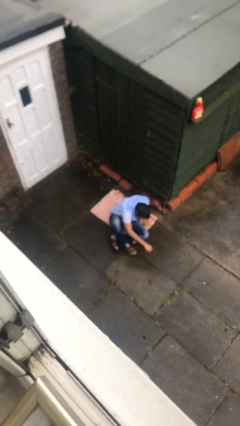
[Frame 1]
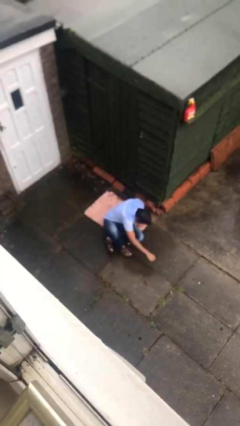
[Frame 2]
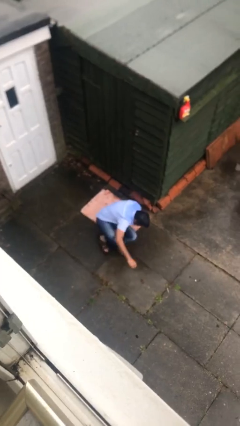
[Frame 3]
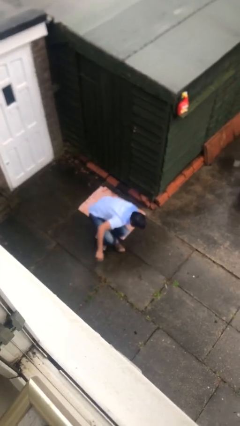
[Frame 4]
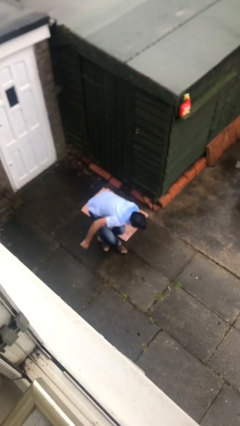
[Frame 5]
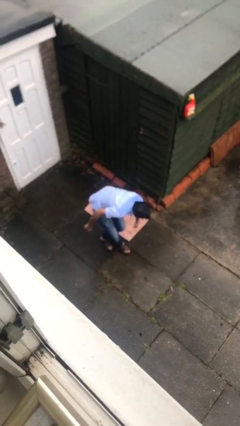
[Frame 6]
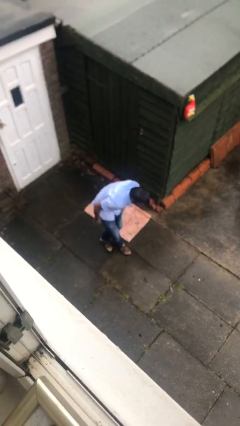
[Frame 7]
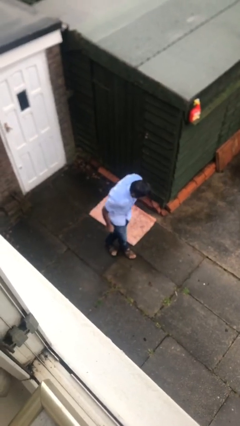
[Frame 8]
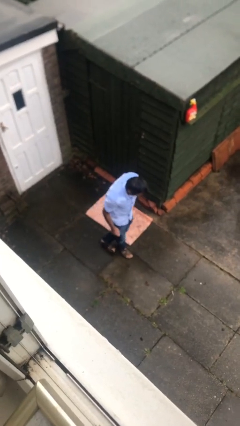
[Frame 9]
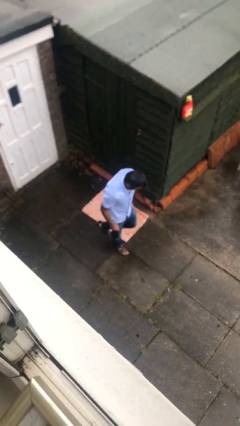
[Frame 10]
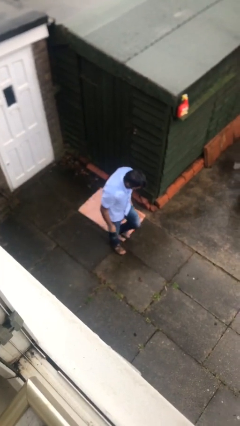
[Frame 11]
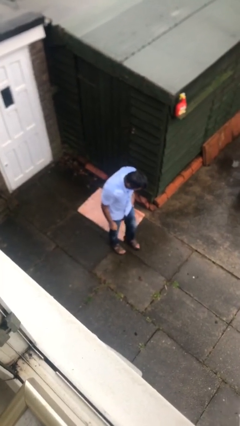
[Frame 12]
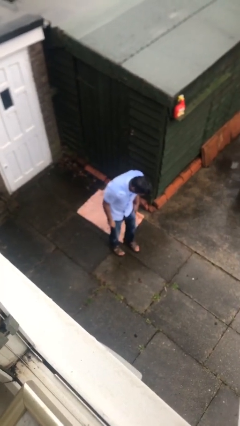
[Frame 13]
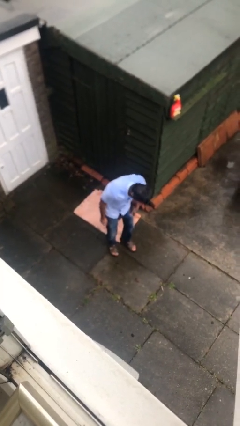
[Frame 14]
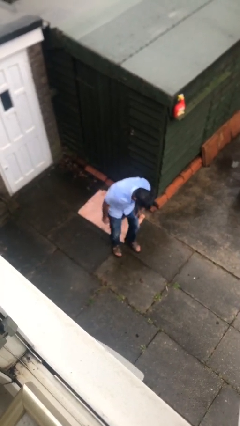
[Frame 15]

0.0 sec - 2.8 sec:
person stands up

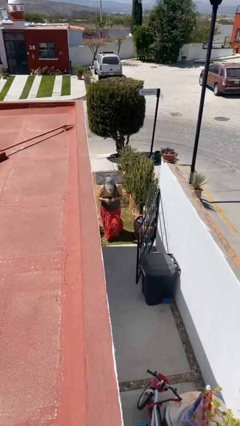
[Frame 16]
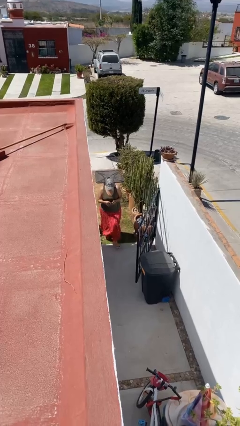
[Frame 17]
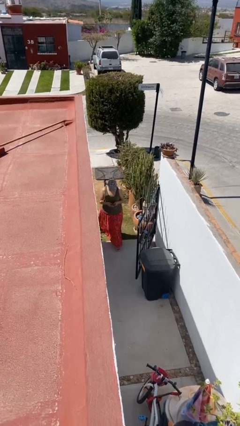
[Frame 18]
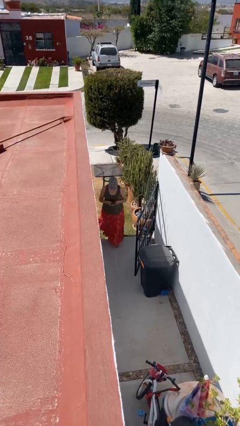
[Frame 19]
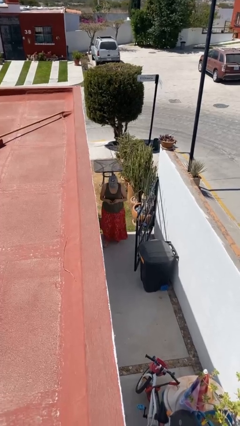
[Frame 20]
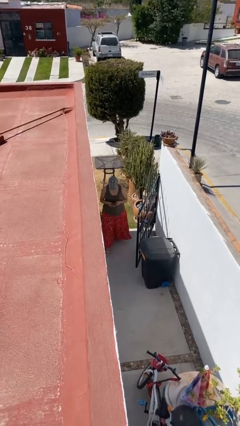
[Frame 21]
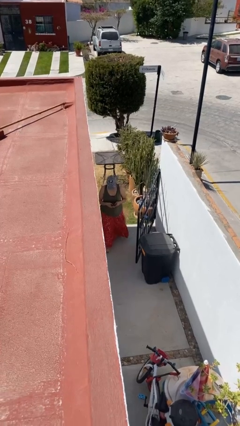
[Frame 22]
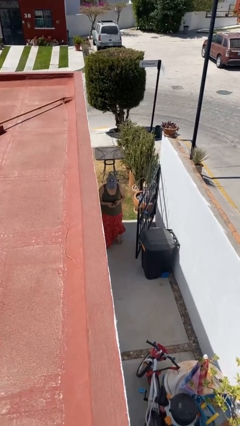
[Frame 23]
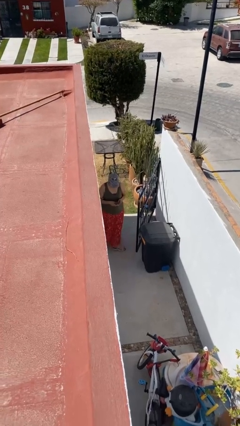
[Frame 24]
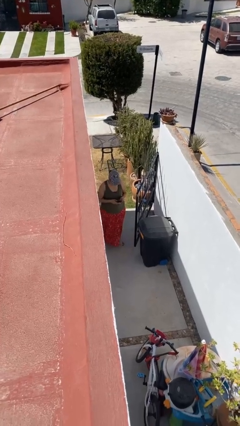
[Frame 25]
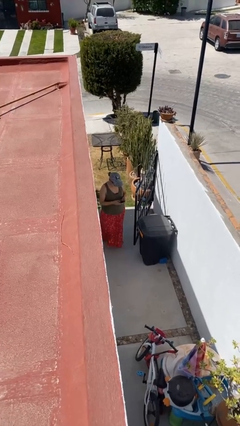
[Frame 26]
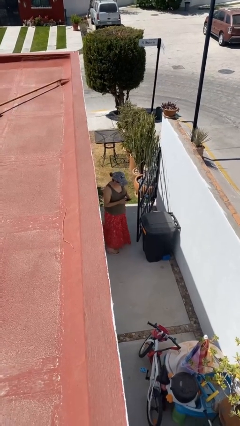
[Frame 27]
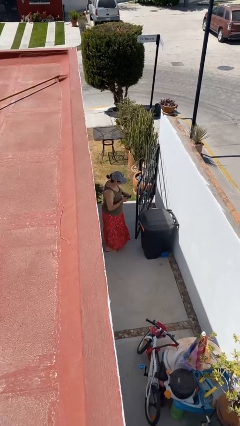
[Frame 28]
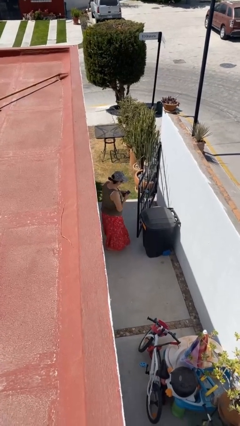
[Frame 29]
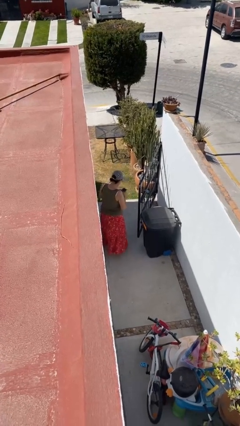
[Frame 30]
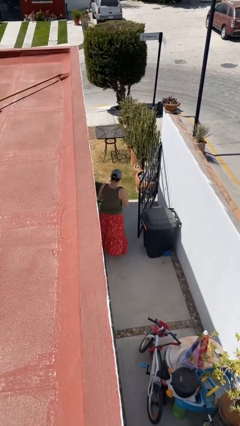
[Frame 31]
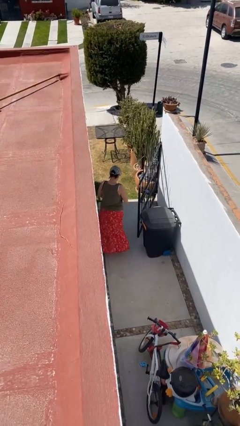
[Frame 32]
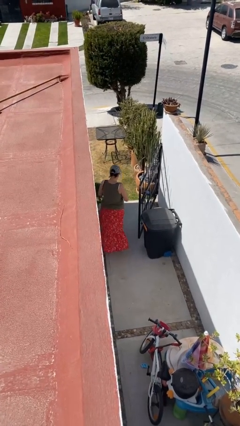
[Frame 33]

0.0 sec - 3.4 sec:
person enters scene through structure

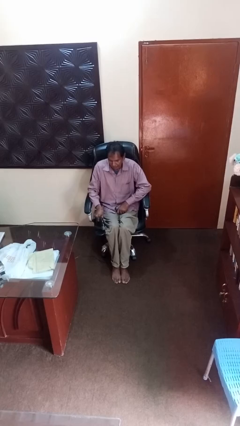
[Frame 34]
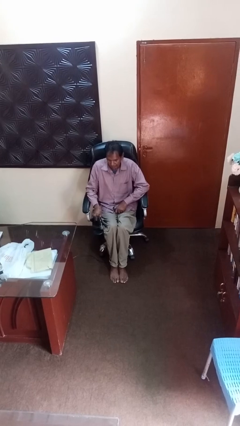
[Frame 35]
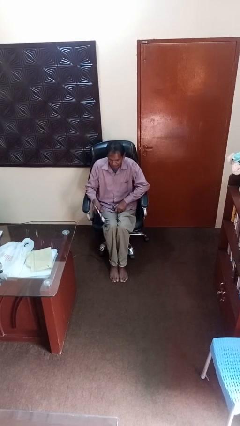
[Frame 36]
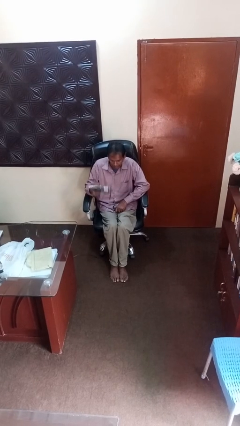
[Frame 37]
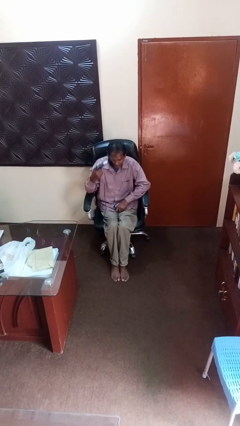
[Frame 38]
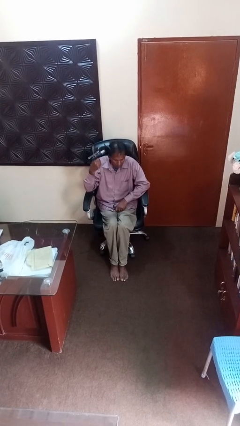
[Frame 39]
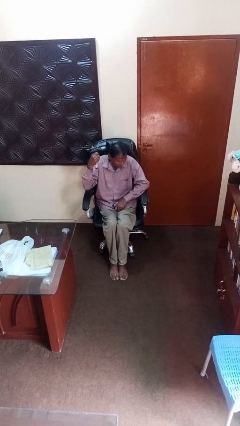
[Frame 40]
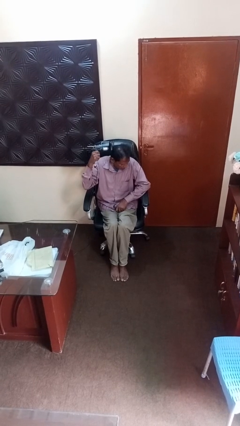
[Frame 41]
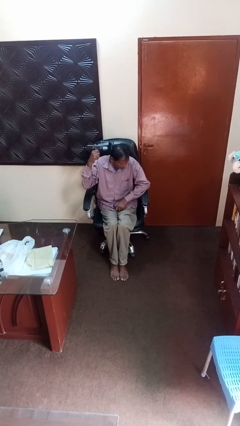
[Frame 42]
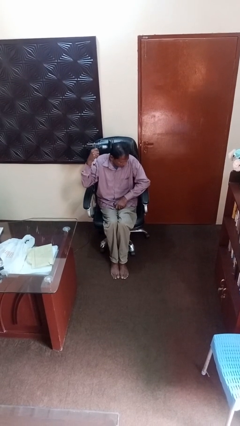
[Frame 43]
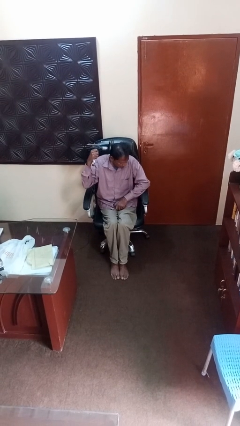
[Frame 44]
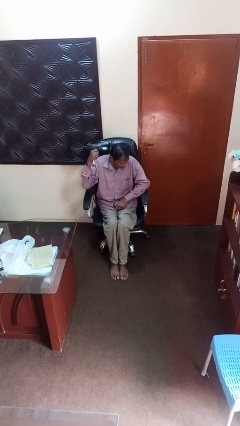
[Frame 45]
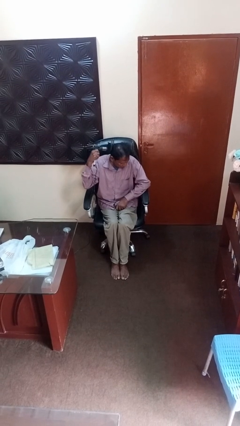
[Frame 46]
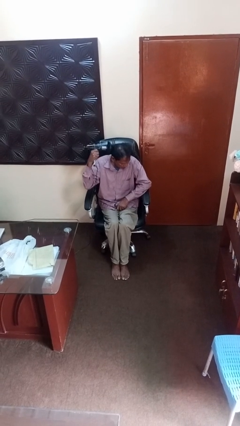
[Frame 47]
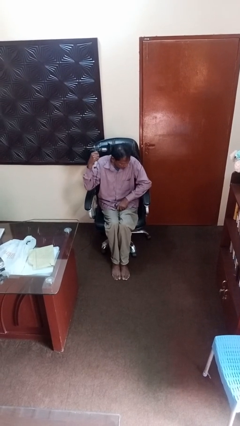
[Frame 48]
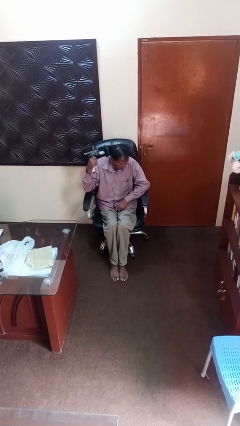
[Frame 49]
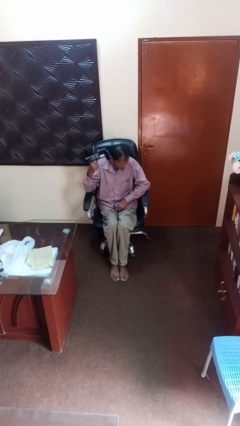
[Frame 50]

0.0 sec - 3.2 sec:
person dries hair with hairdryer

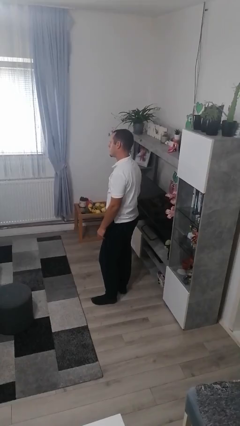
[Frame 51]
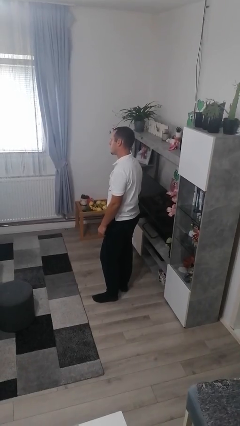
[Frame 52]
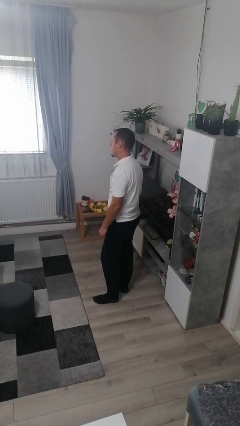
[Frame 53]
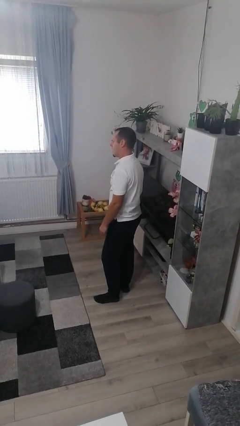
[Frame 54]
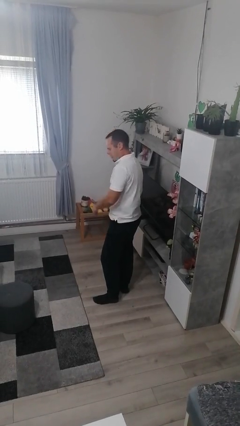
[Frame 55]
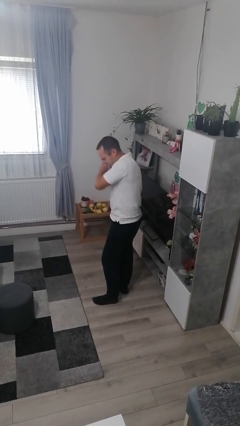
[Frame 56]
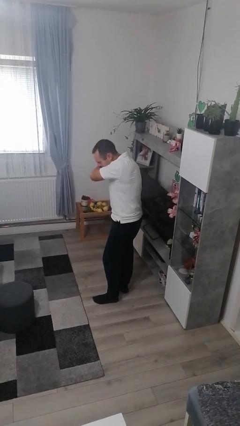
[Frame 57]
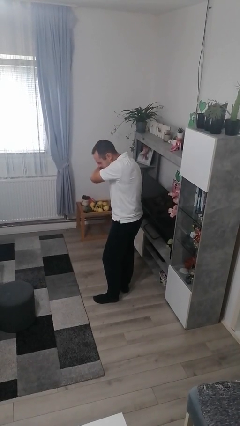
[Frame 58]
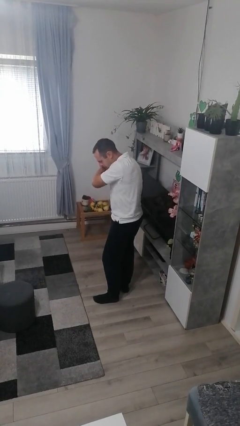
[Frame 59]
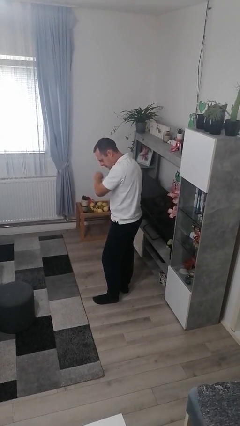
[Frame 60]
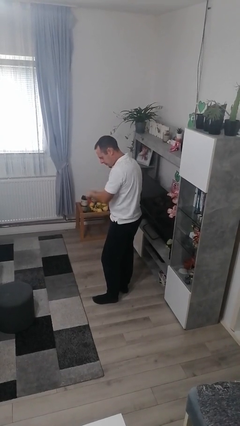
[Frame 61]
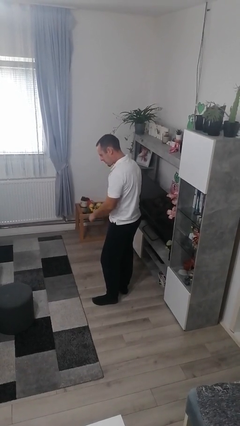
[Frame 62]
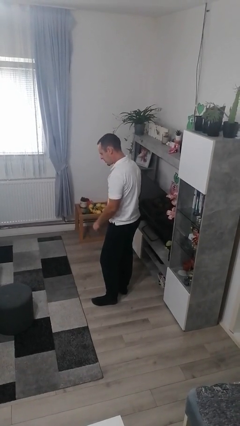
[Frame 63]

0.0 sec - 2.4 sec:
person sneezes into arm

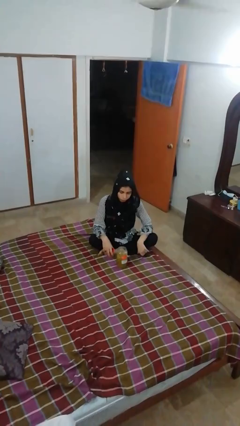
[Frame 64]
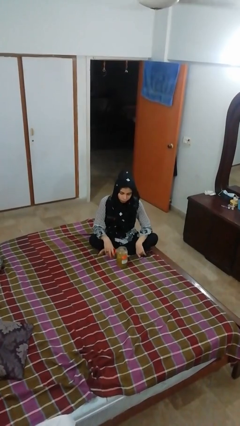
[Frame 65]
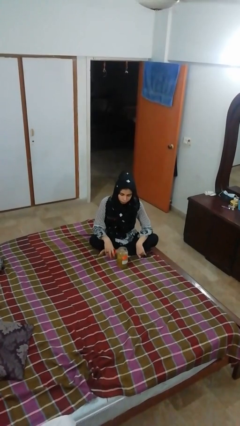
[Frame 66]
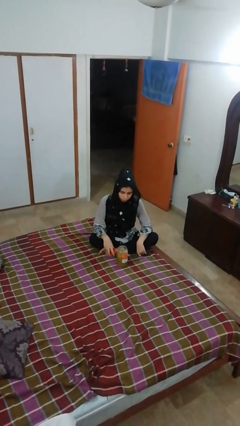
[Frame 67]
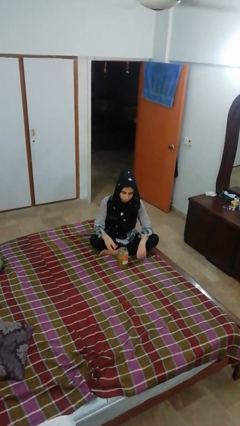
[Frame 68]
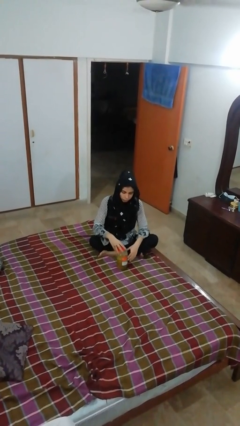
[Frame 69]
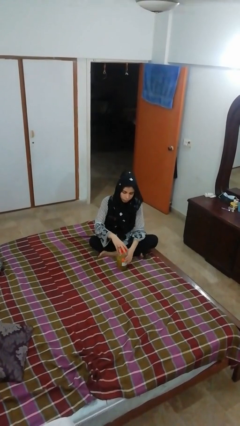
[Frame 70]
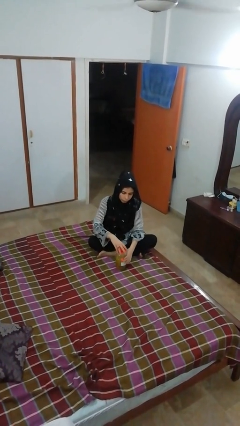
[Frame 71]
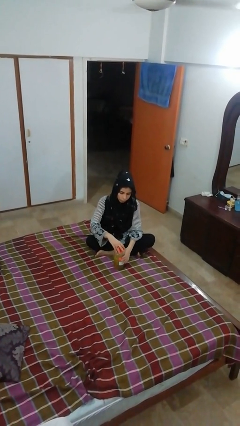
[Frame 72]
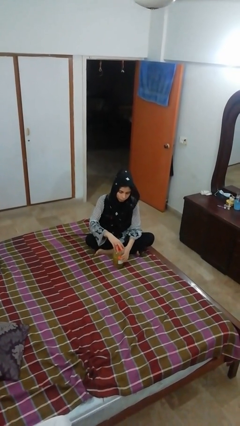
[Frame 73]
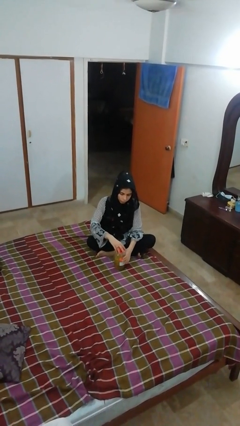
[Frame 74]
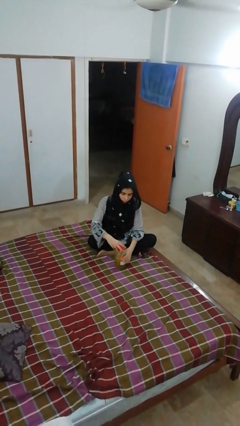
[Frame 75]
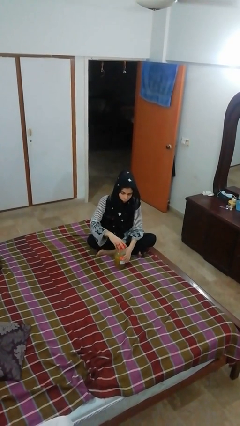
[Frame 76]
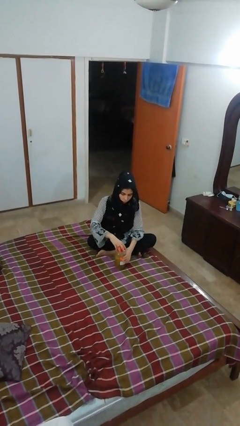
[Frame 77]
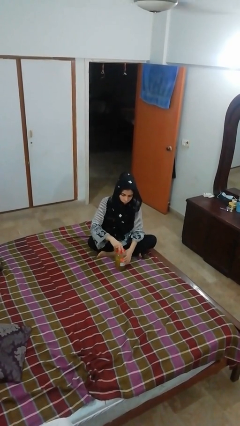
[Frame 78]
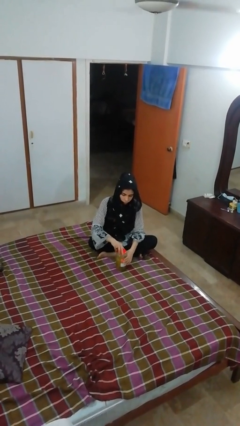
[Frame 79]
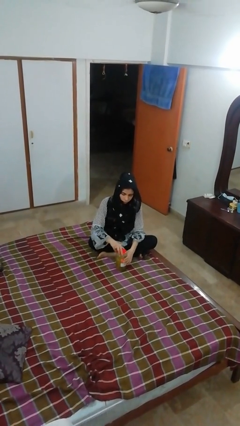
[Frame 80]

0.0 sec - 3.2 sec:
person closes jar

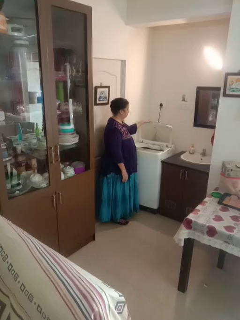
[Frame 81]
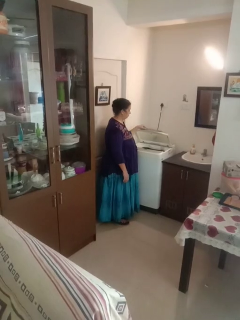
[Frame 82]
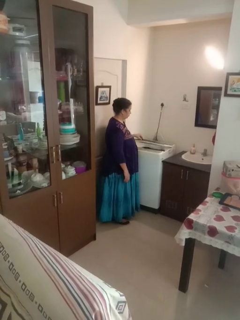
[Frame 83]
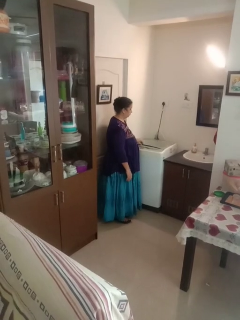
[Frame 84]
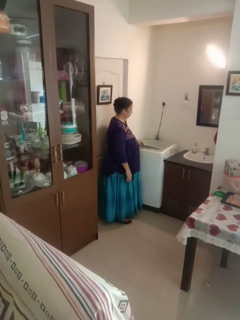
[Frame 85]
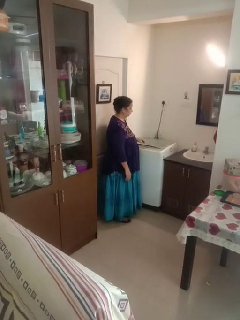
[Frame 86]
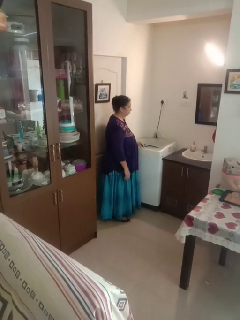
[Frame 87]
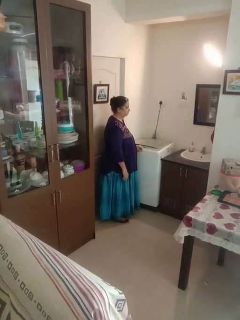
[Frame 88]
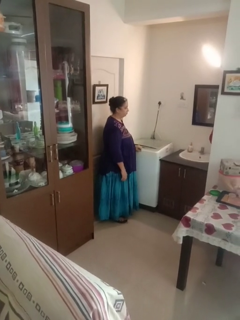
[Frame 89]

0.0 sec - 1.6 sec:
person closes clothes washer

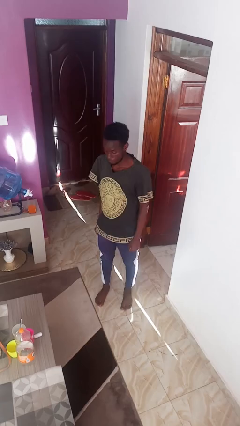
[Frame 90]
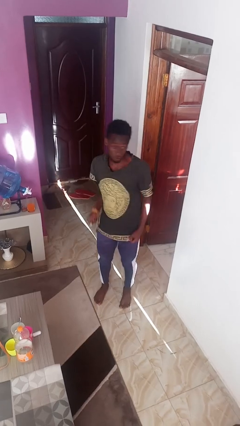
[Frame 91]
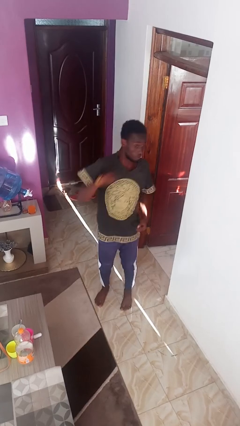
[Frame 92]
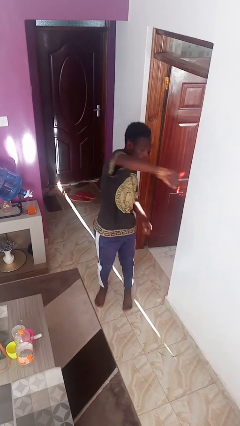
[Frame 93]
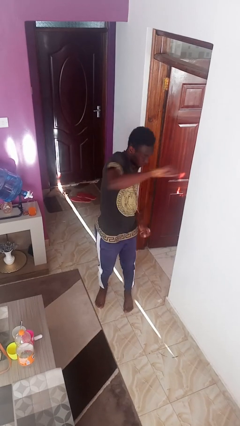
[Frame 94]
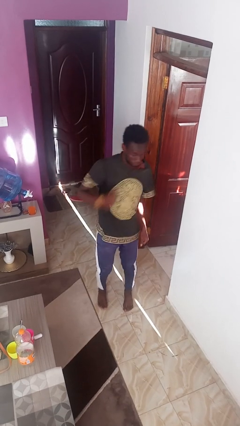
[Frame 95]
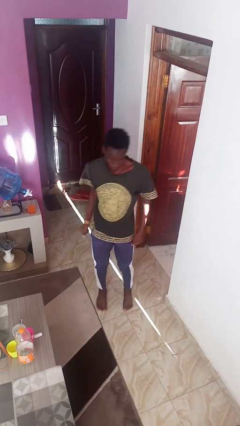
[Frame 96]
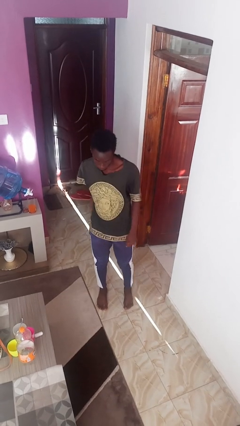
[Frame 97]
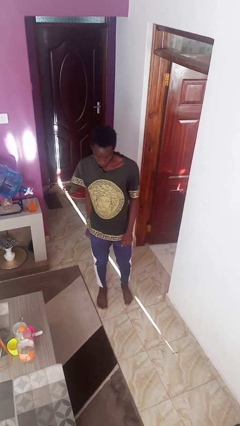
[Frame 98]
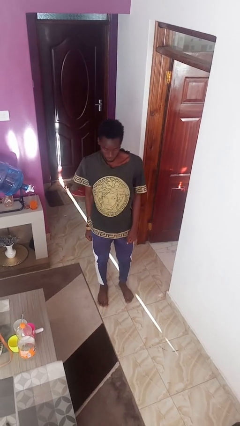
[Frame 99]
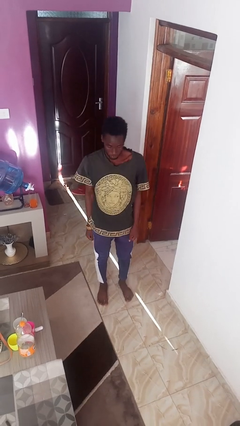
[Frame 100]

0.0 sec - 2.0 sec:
person punches
